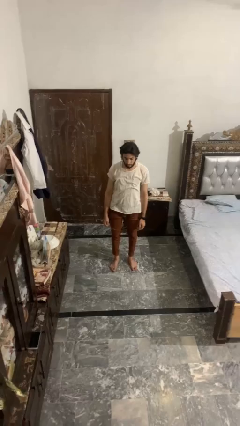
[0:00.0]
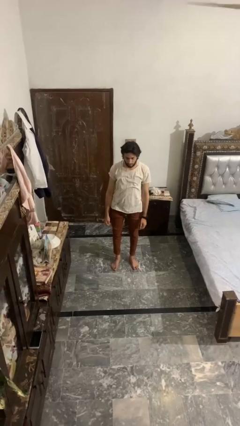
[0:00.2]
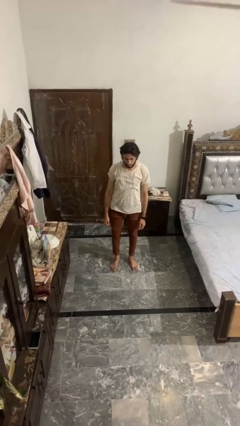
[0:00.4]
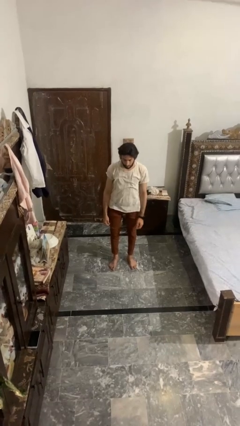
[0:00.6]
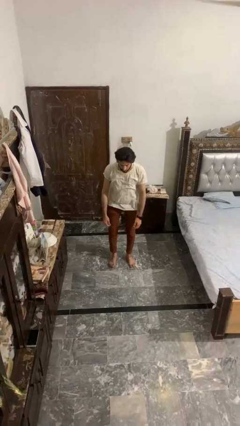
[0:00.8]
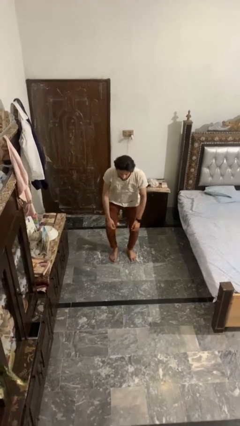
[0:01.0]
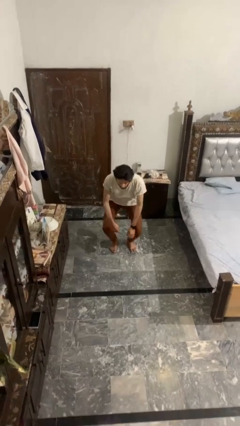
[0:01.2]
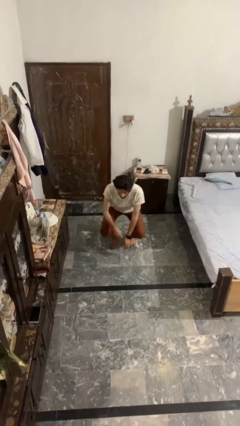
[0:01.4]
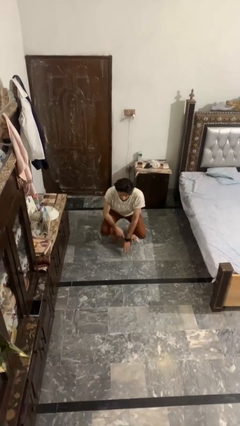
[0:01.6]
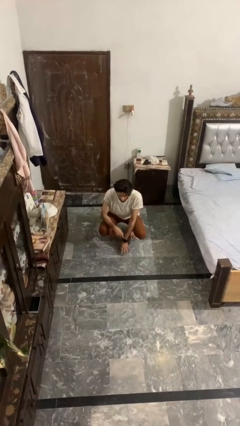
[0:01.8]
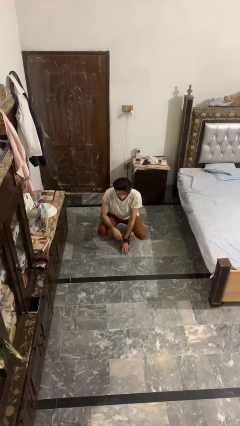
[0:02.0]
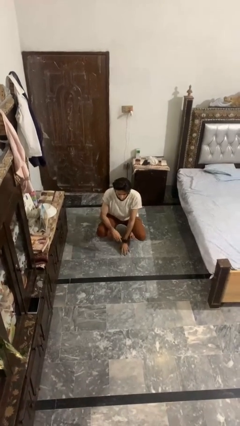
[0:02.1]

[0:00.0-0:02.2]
person squats

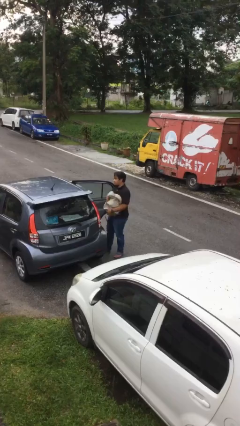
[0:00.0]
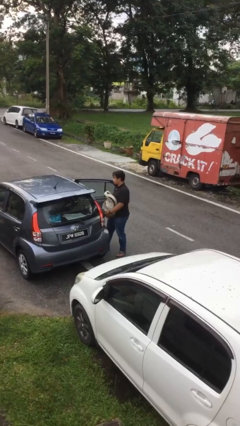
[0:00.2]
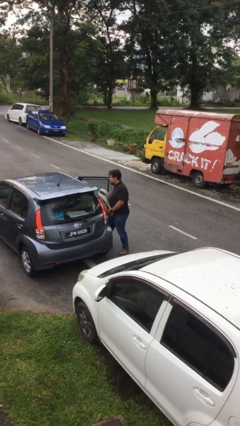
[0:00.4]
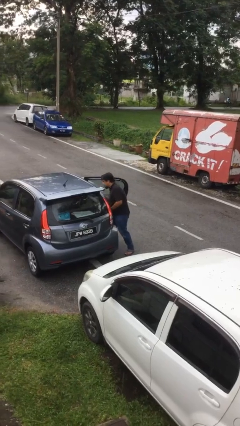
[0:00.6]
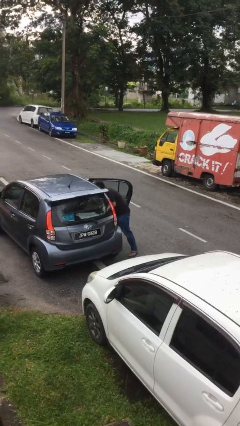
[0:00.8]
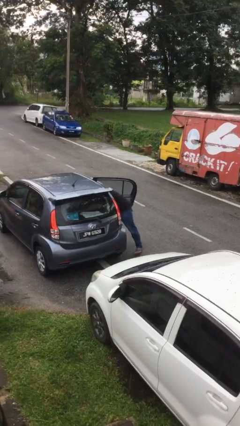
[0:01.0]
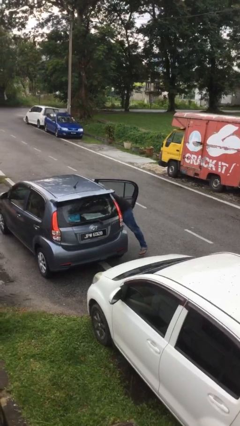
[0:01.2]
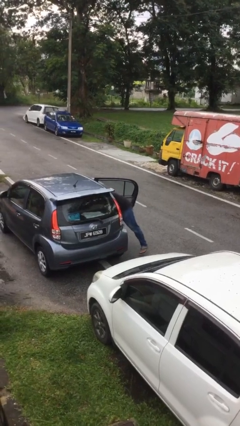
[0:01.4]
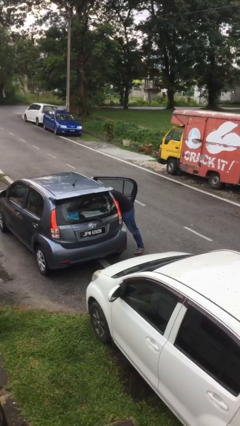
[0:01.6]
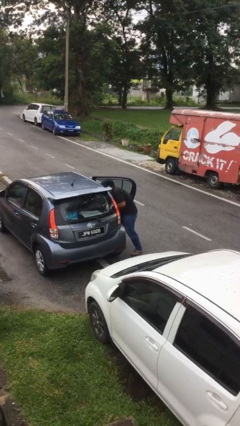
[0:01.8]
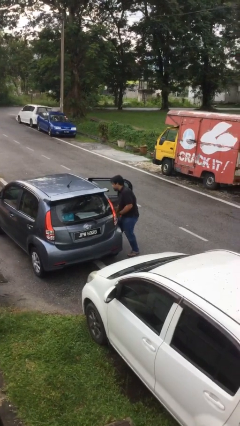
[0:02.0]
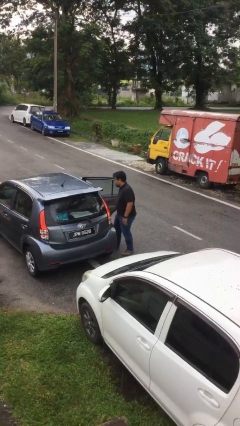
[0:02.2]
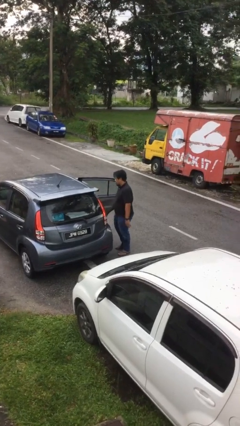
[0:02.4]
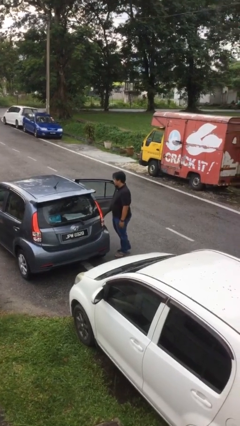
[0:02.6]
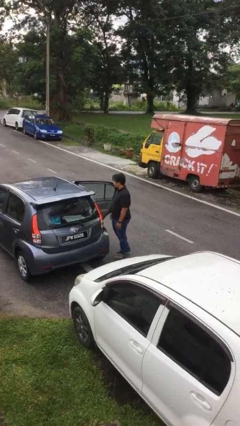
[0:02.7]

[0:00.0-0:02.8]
person loads car

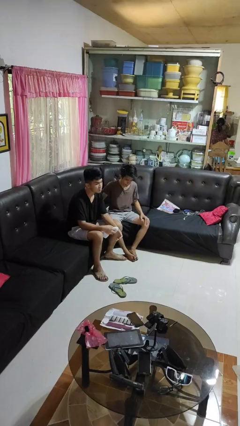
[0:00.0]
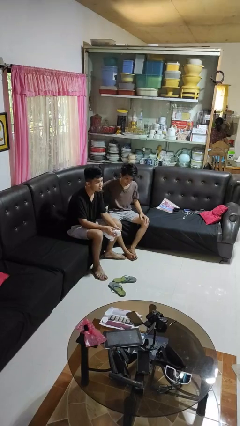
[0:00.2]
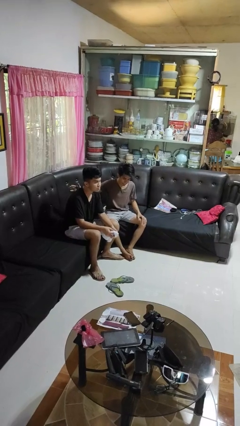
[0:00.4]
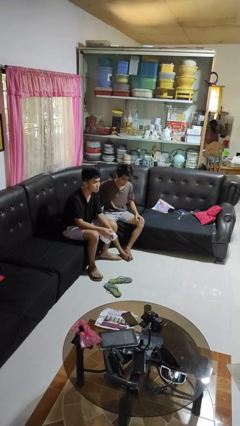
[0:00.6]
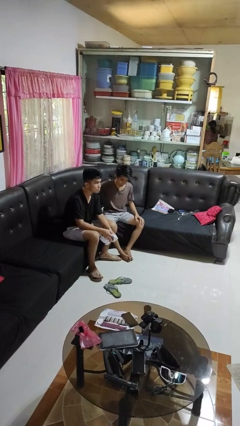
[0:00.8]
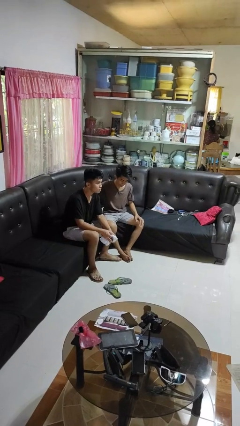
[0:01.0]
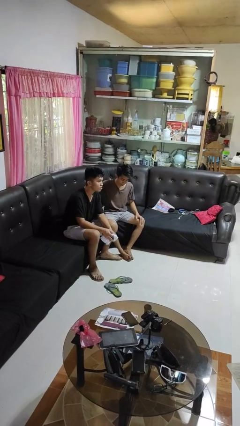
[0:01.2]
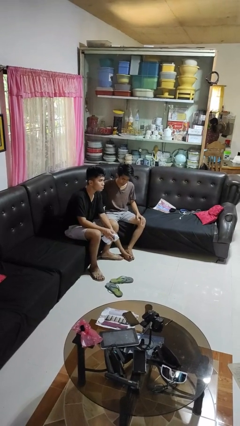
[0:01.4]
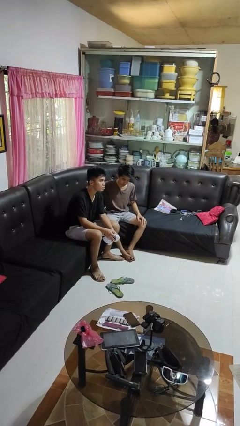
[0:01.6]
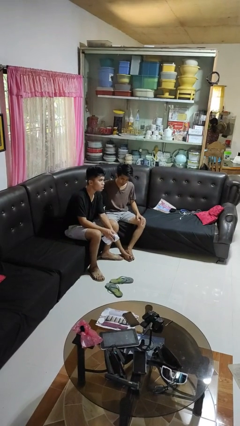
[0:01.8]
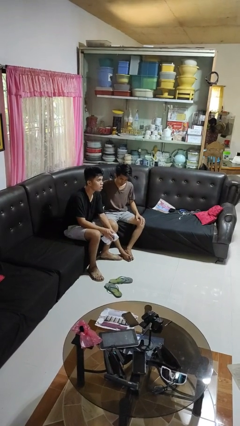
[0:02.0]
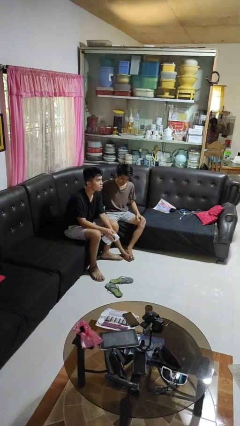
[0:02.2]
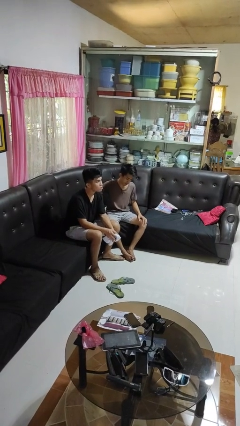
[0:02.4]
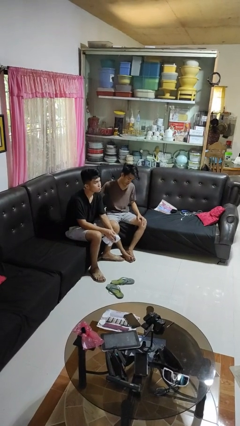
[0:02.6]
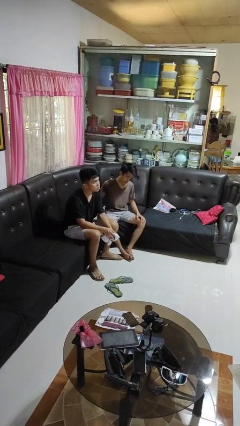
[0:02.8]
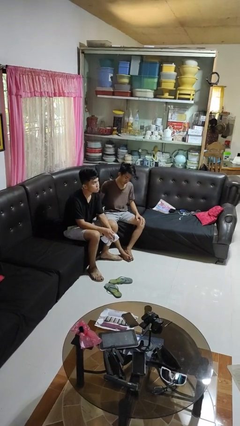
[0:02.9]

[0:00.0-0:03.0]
person touches back of person

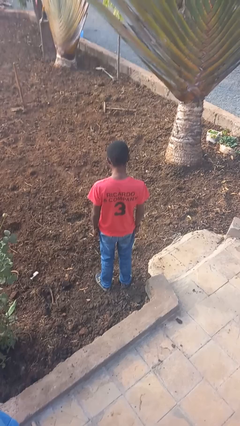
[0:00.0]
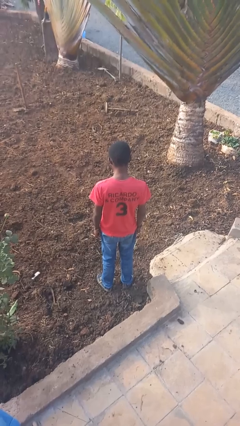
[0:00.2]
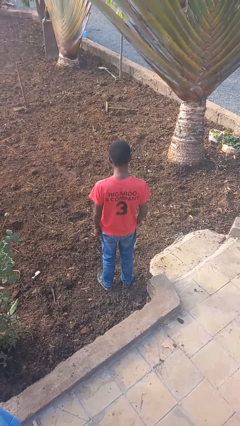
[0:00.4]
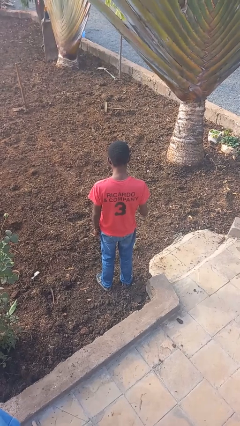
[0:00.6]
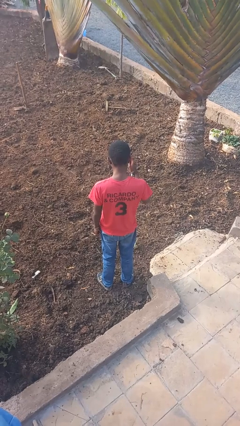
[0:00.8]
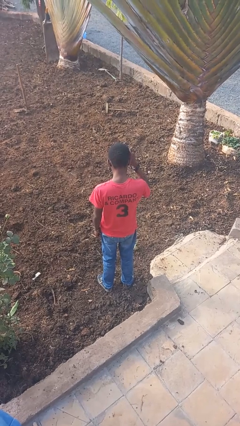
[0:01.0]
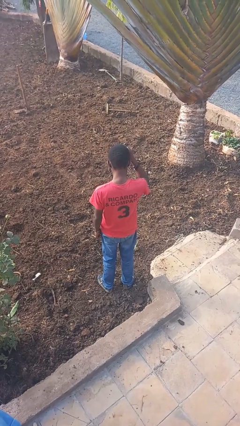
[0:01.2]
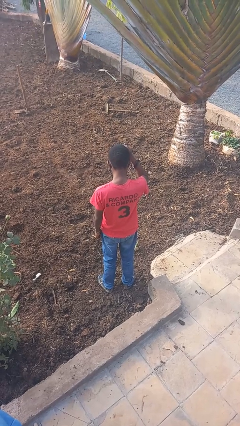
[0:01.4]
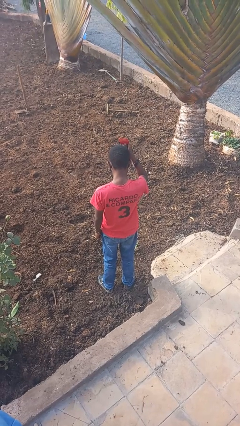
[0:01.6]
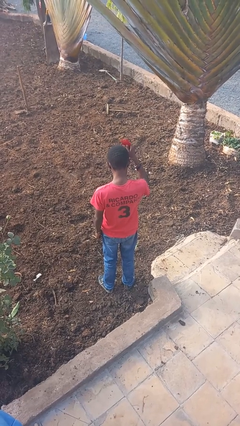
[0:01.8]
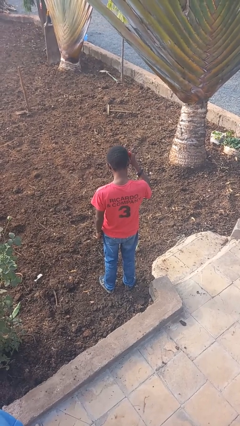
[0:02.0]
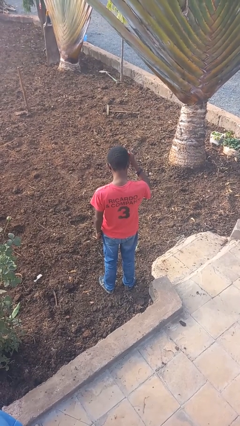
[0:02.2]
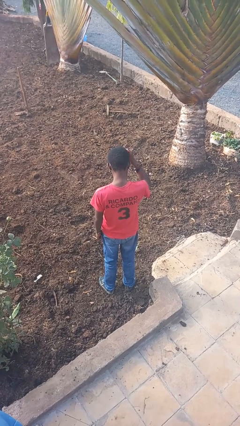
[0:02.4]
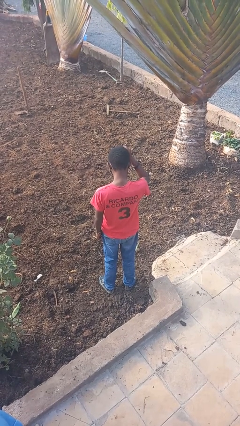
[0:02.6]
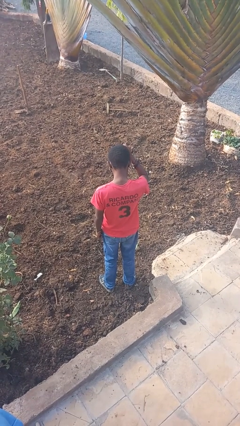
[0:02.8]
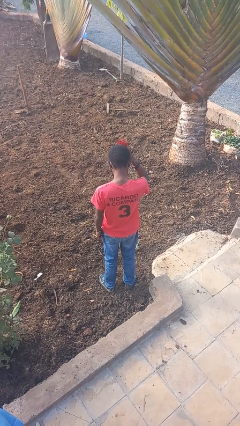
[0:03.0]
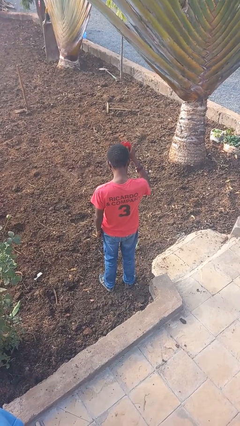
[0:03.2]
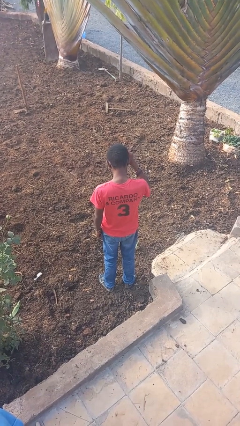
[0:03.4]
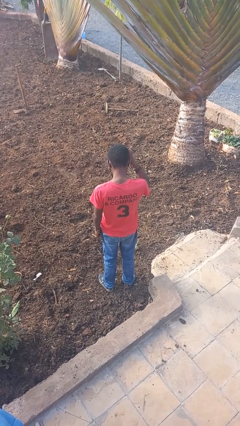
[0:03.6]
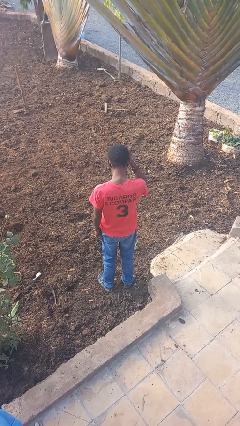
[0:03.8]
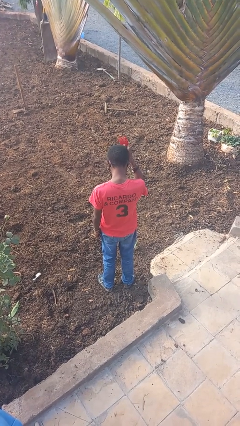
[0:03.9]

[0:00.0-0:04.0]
person brushes hair

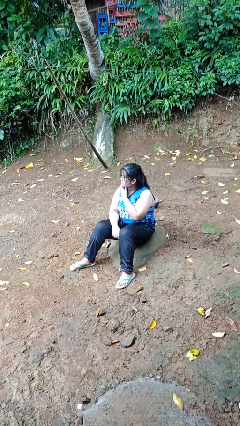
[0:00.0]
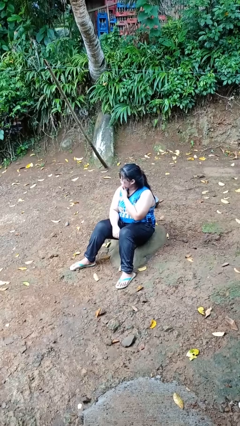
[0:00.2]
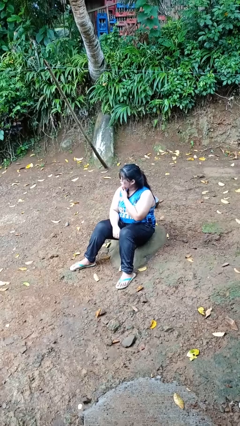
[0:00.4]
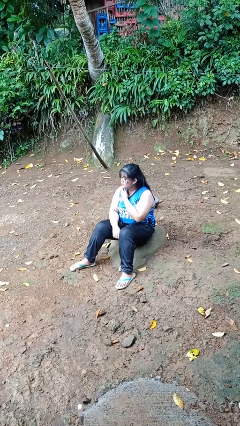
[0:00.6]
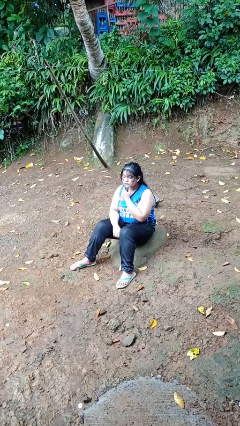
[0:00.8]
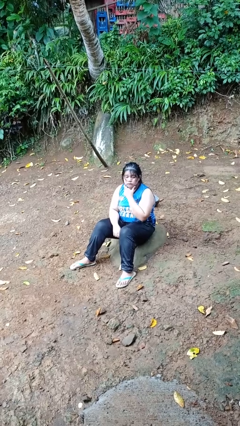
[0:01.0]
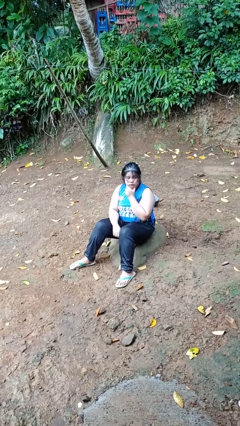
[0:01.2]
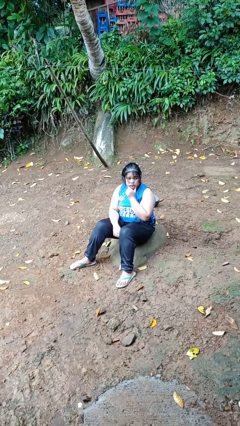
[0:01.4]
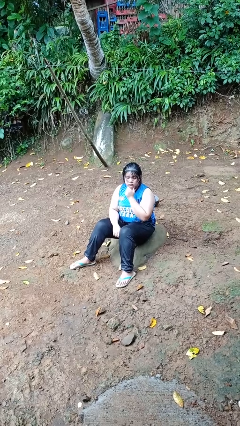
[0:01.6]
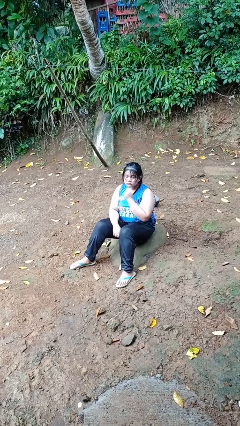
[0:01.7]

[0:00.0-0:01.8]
person strokes chin

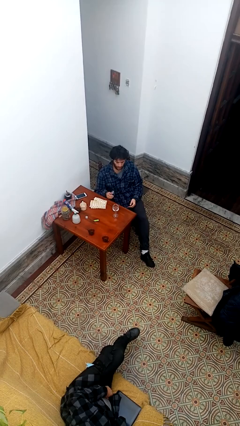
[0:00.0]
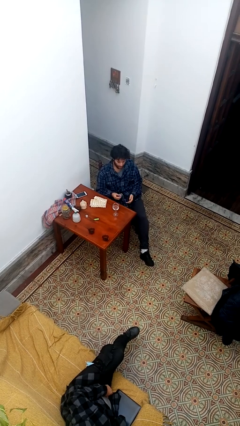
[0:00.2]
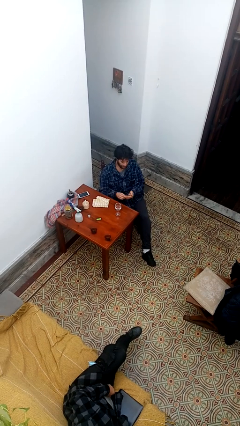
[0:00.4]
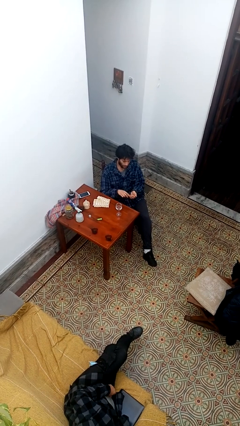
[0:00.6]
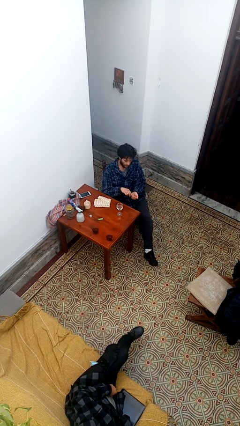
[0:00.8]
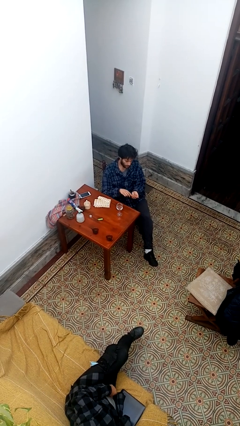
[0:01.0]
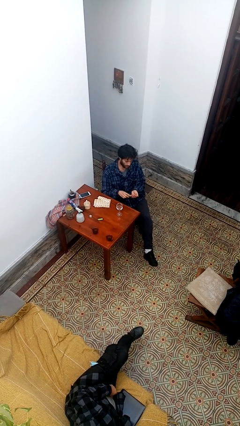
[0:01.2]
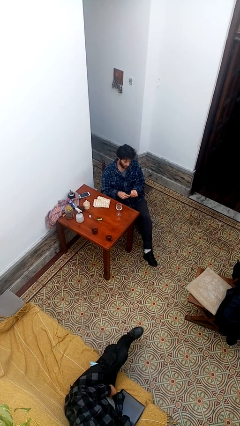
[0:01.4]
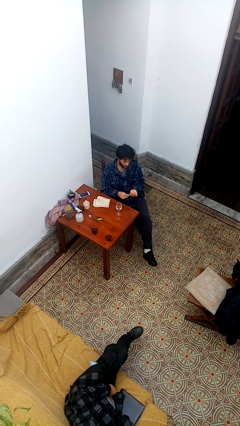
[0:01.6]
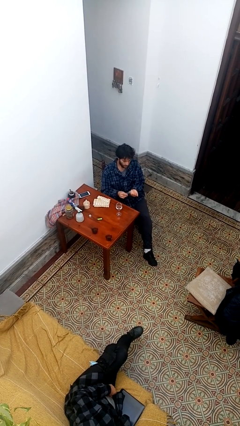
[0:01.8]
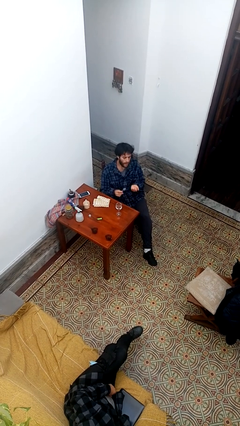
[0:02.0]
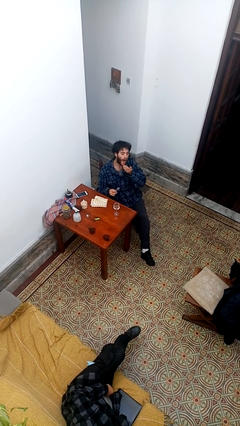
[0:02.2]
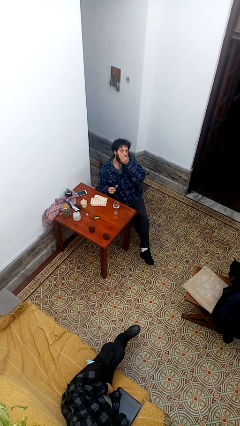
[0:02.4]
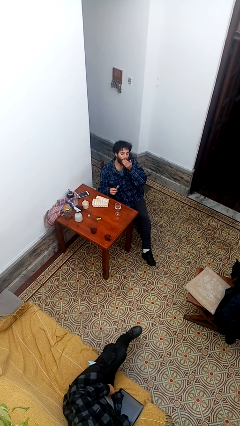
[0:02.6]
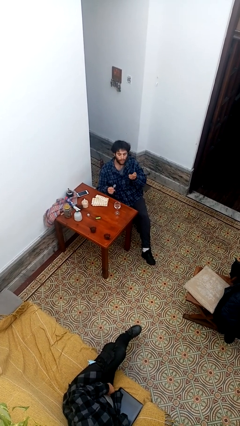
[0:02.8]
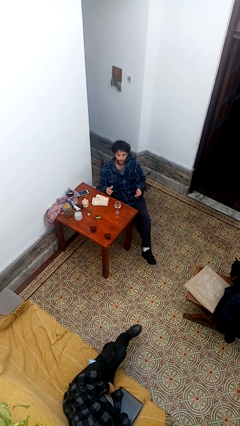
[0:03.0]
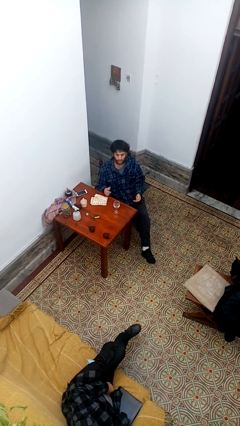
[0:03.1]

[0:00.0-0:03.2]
person takes medicine pills

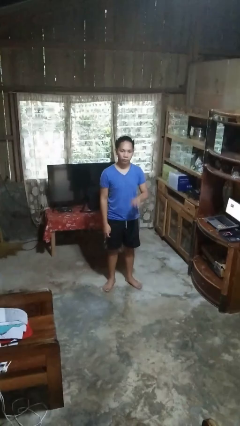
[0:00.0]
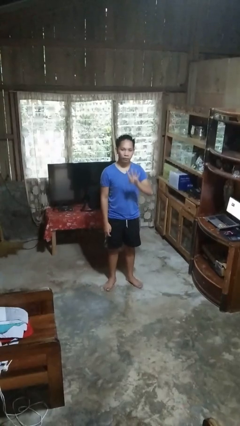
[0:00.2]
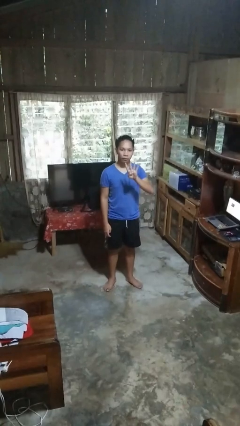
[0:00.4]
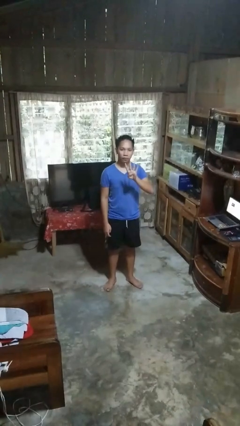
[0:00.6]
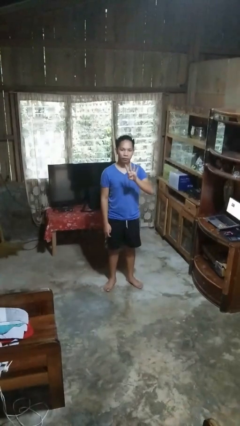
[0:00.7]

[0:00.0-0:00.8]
person gestures number four
